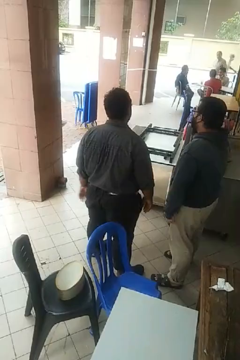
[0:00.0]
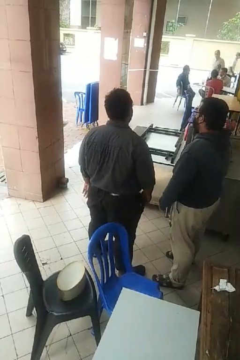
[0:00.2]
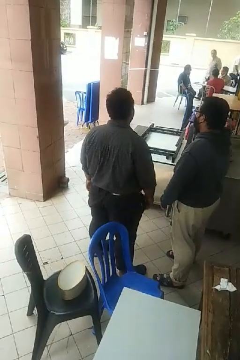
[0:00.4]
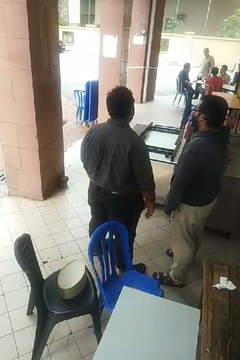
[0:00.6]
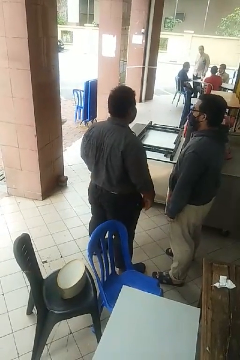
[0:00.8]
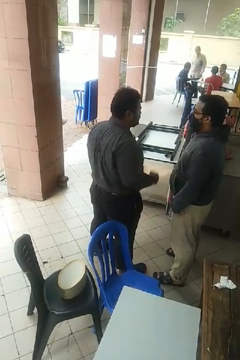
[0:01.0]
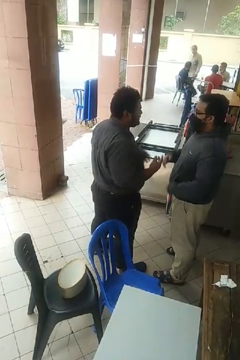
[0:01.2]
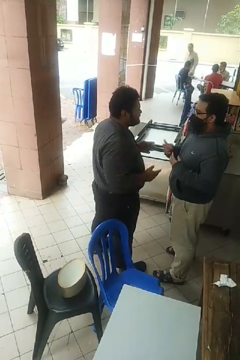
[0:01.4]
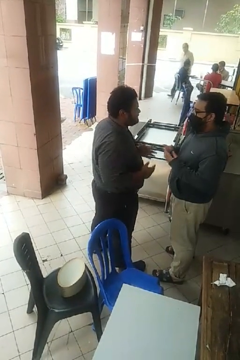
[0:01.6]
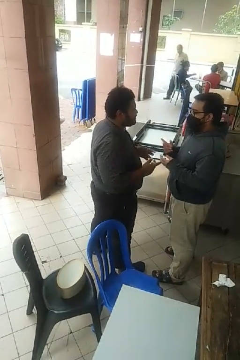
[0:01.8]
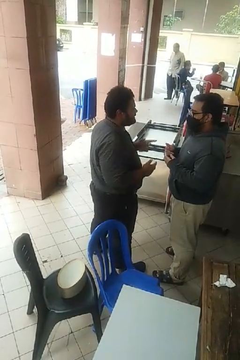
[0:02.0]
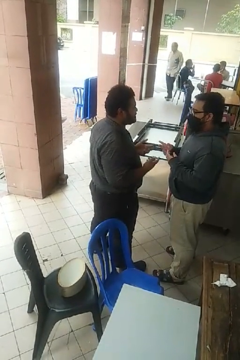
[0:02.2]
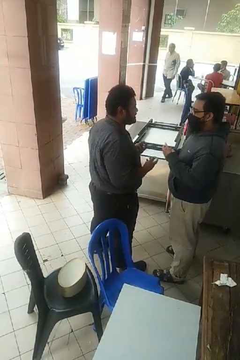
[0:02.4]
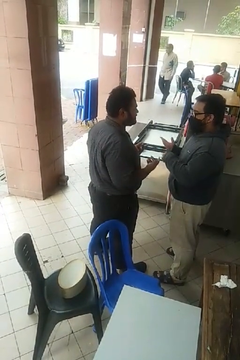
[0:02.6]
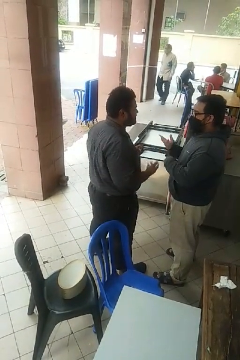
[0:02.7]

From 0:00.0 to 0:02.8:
person talks to person

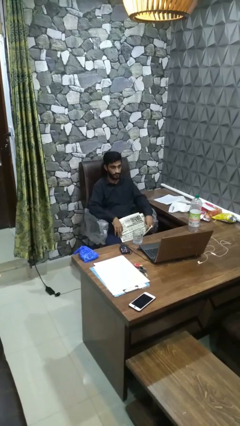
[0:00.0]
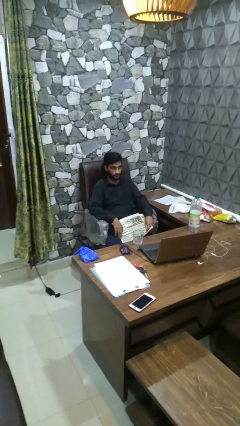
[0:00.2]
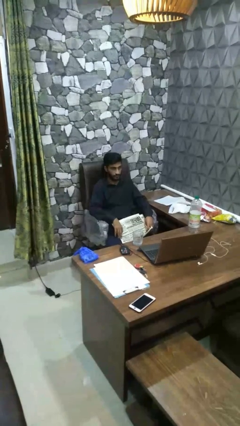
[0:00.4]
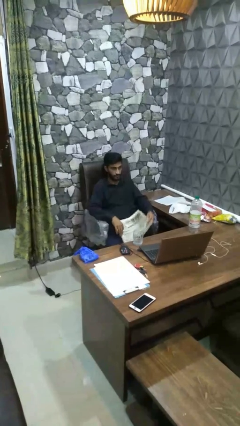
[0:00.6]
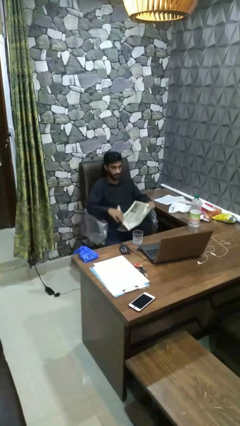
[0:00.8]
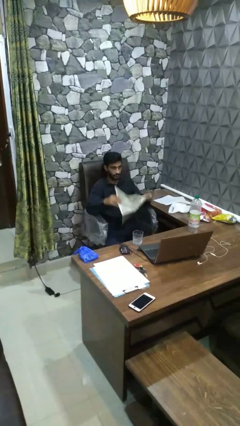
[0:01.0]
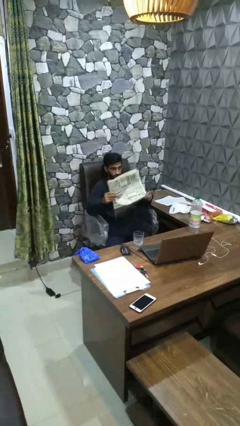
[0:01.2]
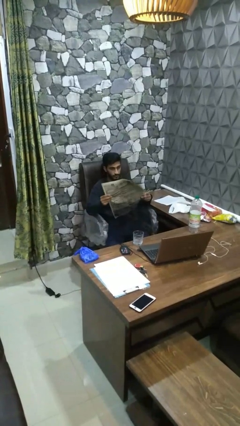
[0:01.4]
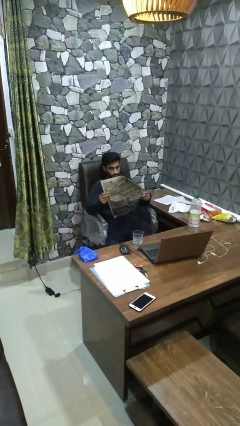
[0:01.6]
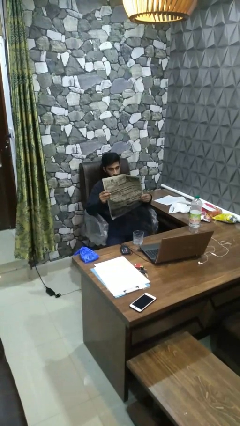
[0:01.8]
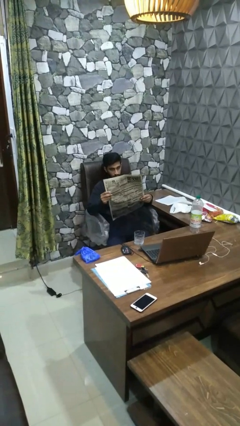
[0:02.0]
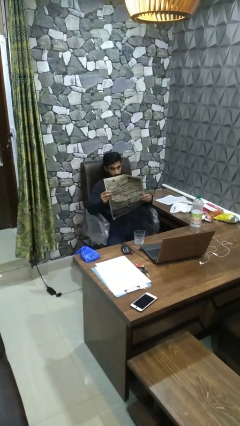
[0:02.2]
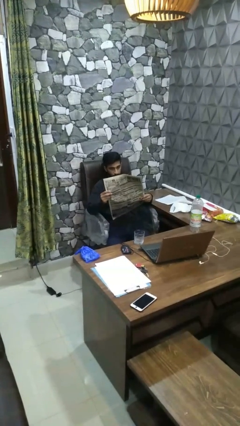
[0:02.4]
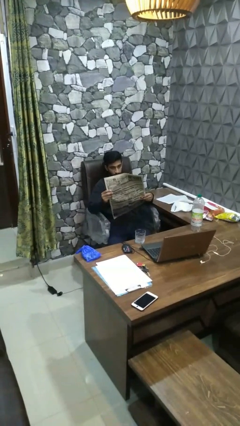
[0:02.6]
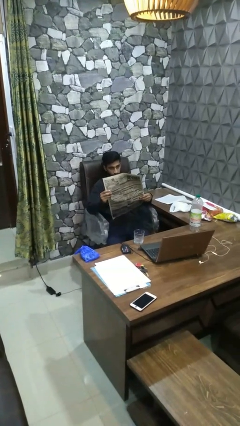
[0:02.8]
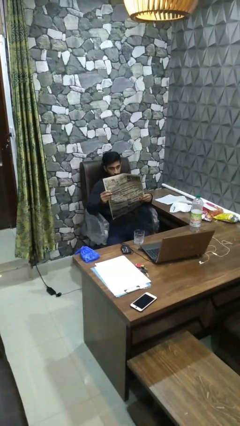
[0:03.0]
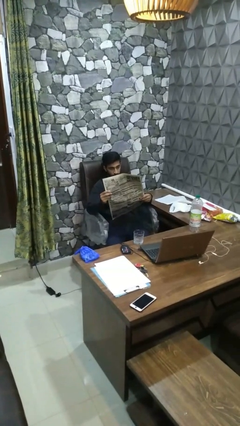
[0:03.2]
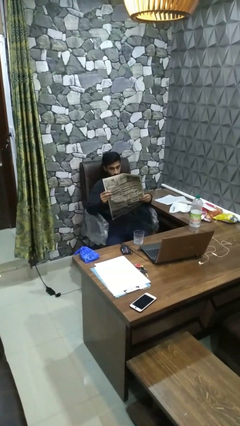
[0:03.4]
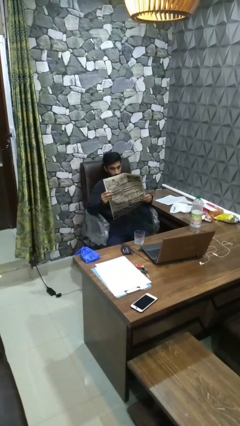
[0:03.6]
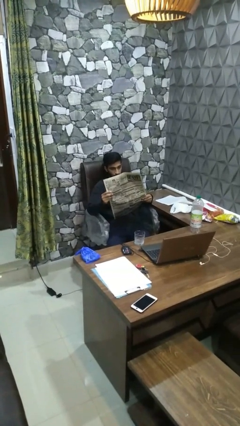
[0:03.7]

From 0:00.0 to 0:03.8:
person reads newspaper

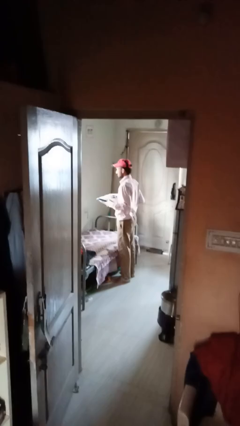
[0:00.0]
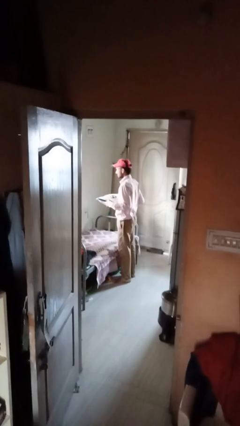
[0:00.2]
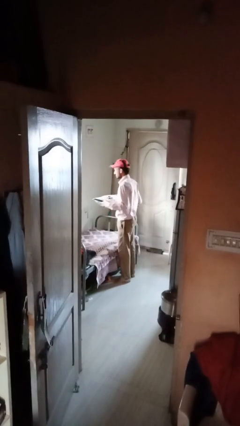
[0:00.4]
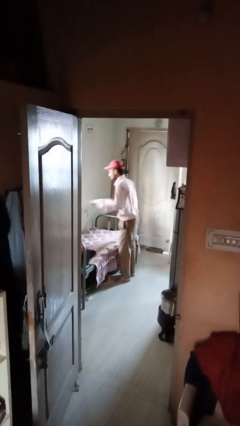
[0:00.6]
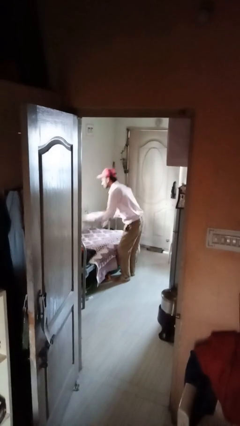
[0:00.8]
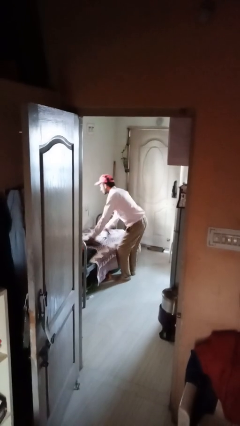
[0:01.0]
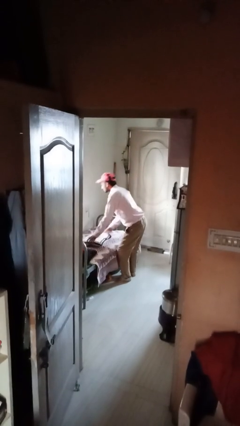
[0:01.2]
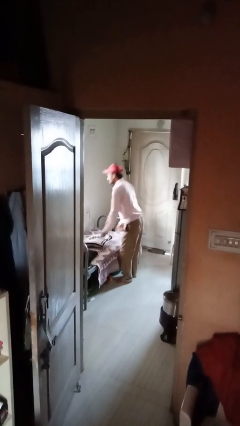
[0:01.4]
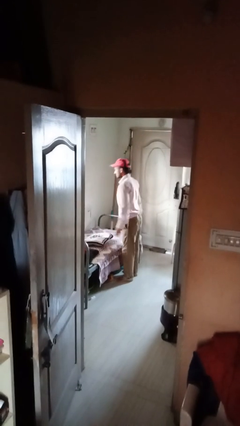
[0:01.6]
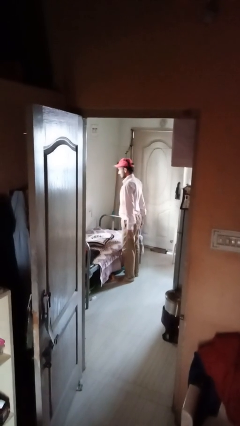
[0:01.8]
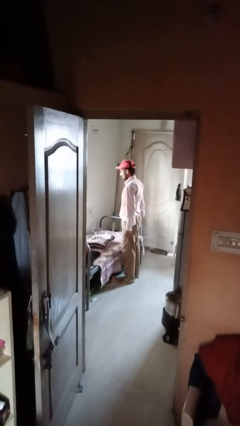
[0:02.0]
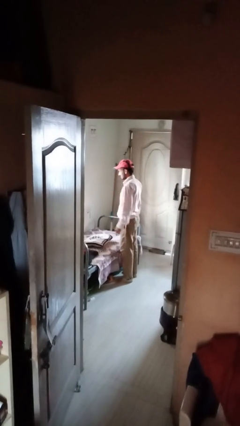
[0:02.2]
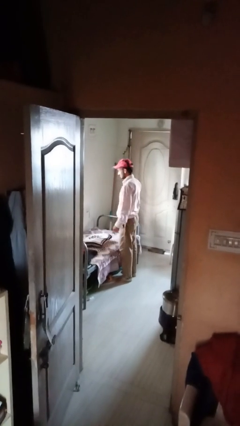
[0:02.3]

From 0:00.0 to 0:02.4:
person puts down object on bed

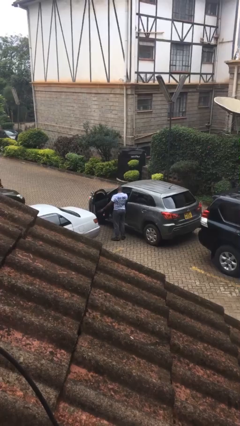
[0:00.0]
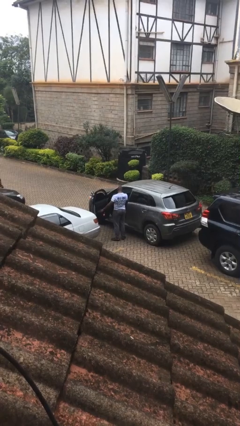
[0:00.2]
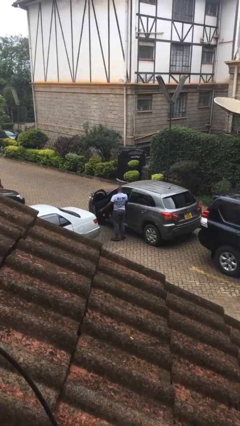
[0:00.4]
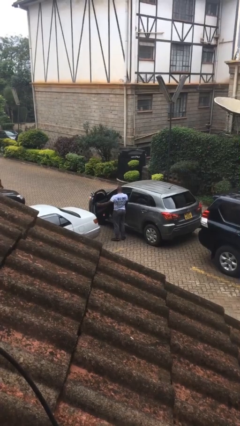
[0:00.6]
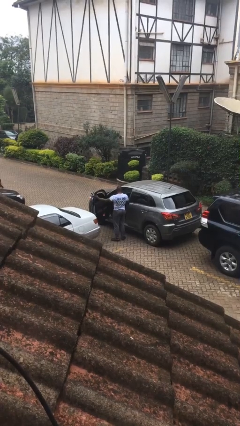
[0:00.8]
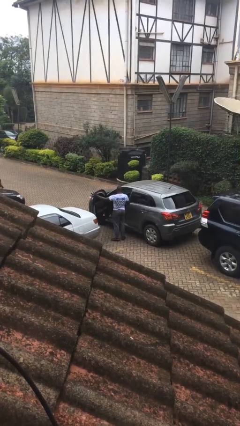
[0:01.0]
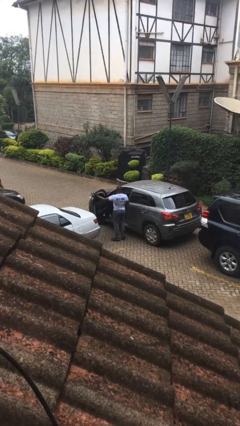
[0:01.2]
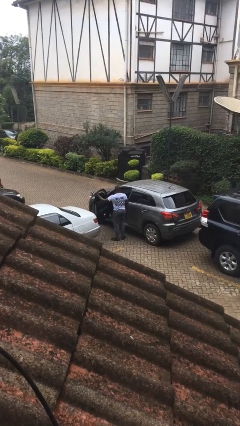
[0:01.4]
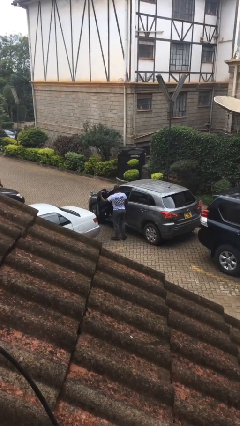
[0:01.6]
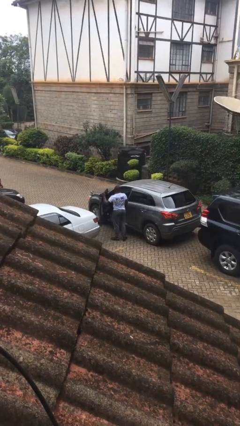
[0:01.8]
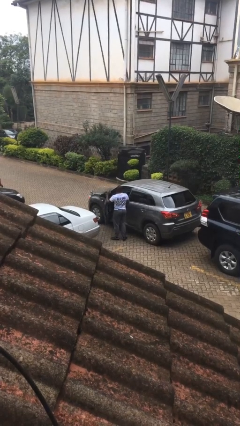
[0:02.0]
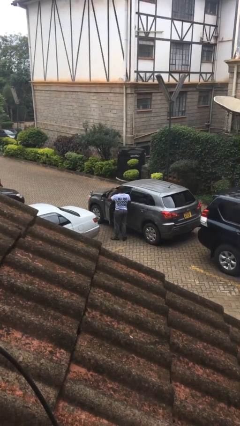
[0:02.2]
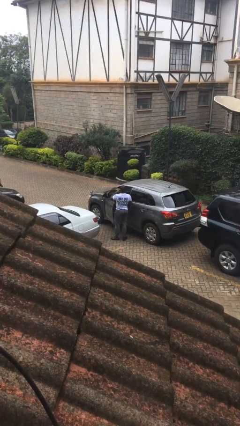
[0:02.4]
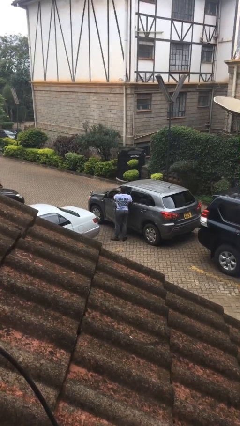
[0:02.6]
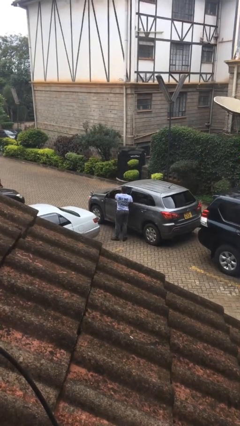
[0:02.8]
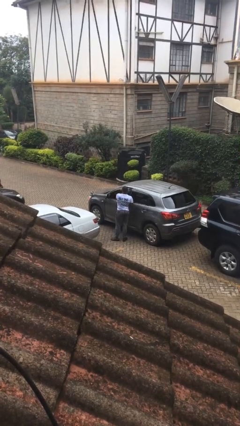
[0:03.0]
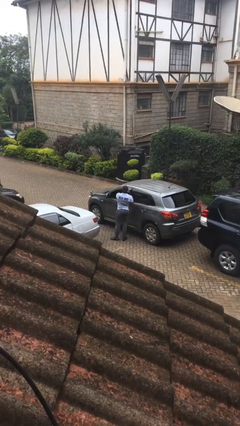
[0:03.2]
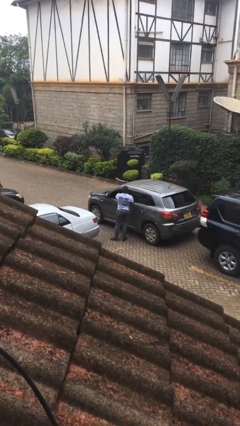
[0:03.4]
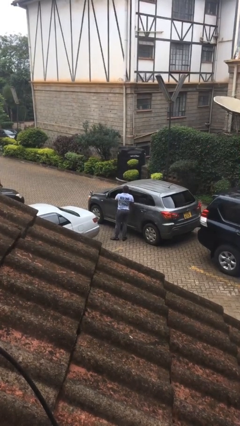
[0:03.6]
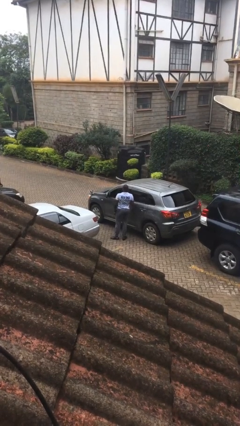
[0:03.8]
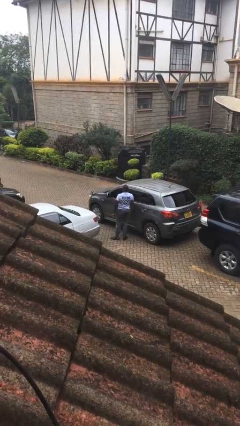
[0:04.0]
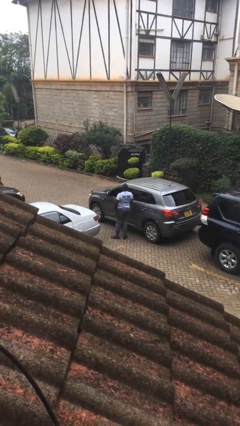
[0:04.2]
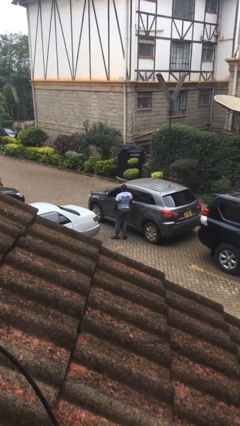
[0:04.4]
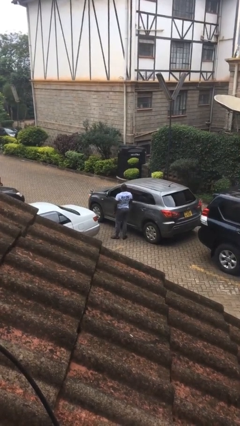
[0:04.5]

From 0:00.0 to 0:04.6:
person closes car door

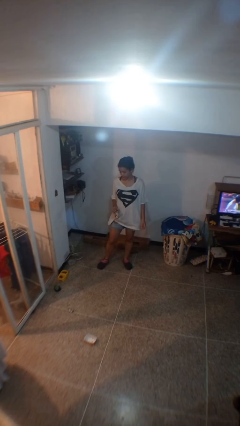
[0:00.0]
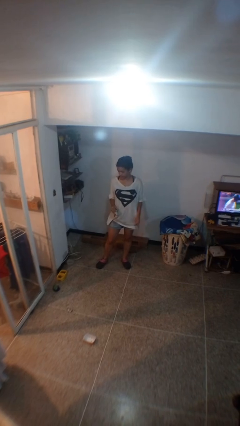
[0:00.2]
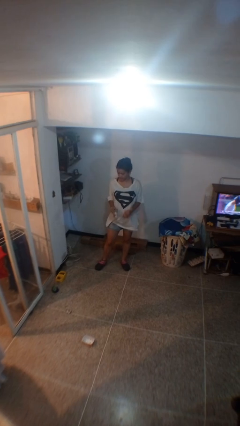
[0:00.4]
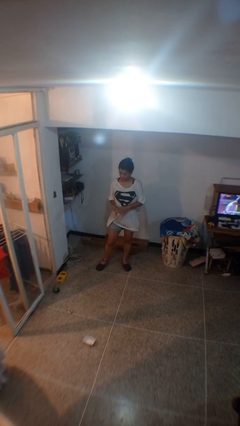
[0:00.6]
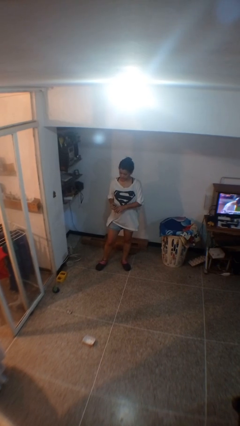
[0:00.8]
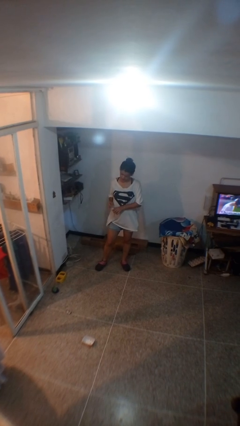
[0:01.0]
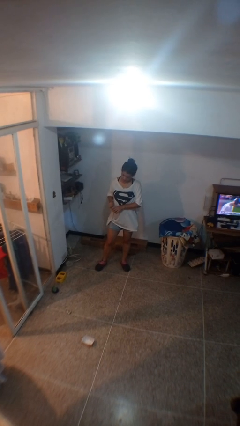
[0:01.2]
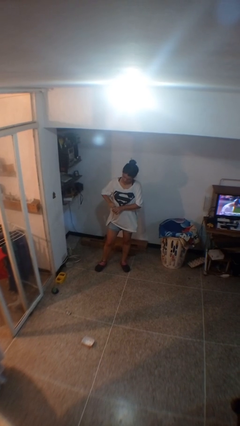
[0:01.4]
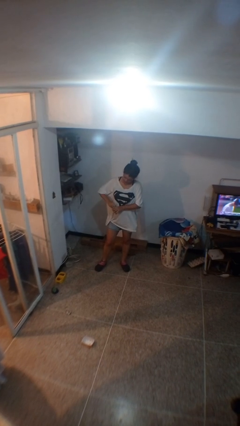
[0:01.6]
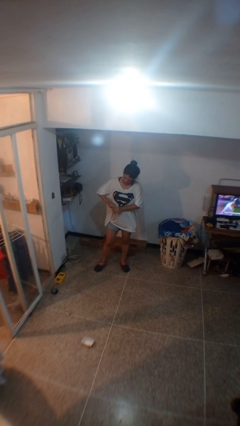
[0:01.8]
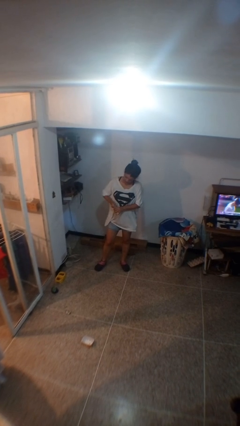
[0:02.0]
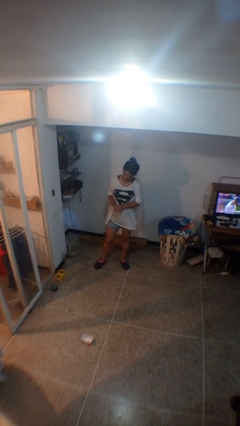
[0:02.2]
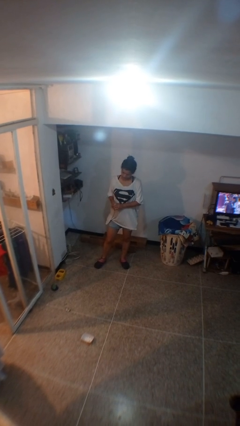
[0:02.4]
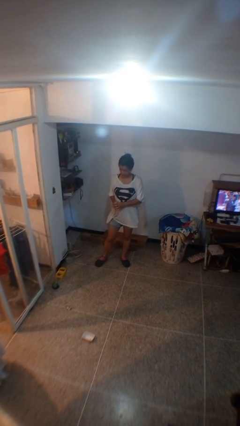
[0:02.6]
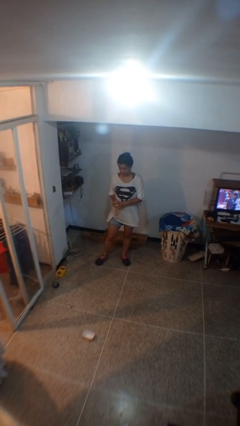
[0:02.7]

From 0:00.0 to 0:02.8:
person opens beverage can

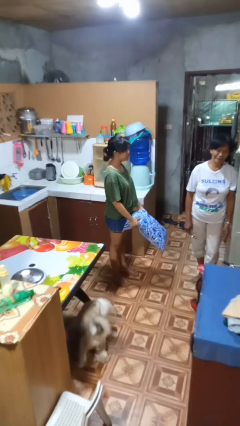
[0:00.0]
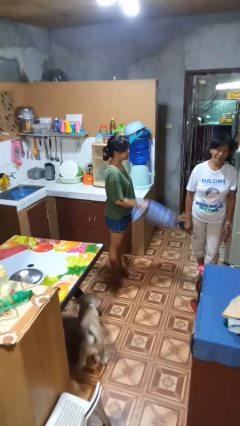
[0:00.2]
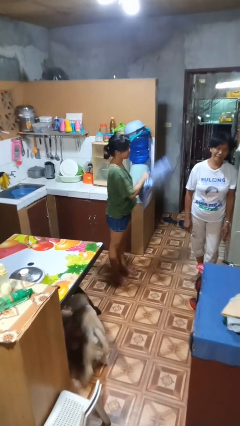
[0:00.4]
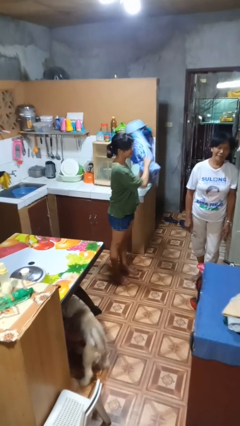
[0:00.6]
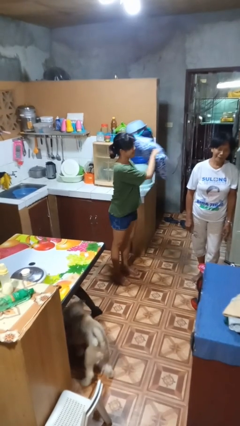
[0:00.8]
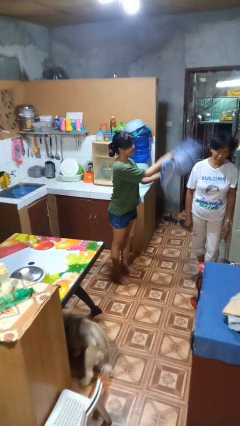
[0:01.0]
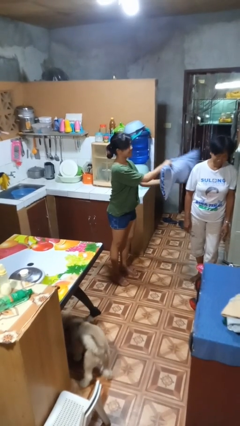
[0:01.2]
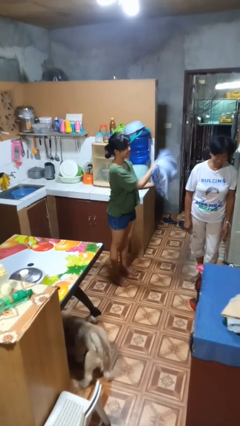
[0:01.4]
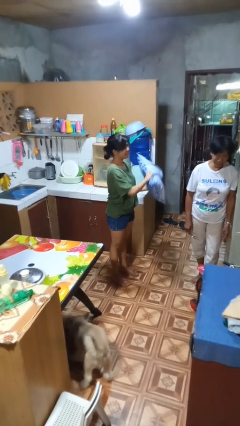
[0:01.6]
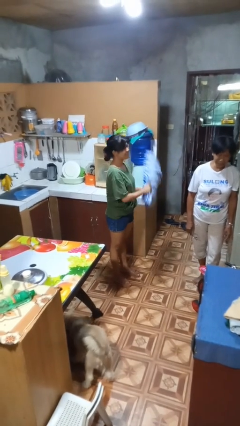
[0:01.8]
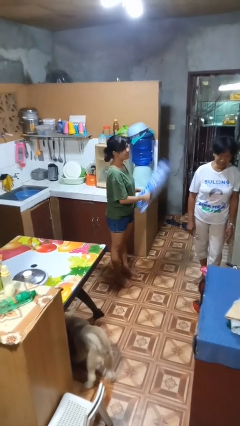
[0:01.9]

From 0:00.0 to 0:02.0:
person hits person with pillow
